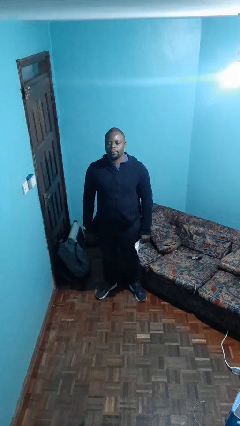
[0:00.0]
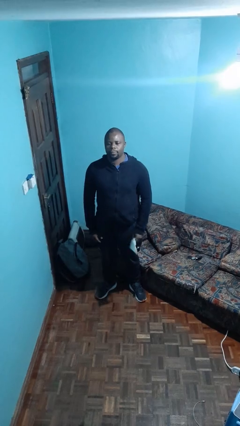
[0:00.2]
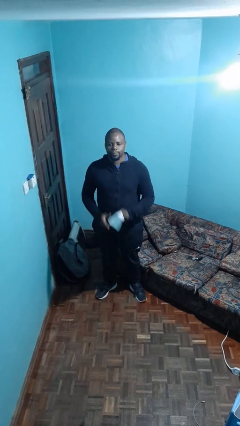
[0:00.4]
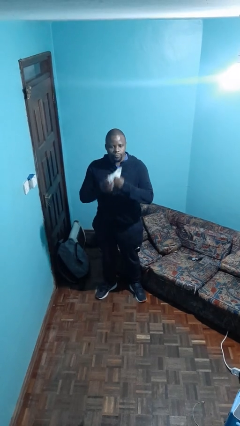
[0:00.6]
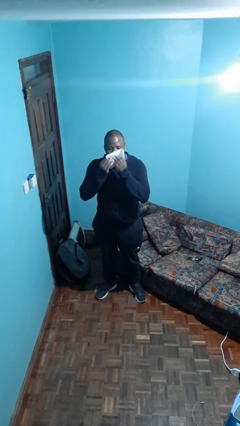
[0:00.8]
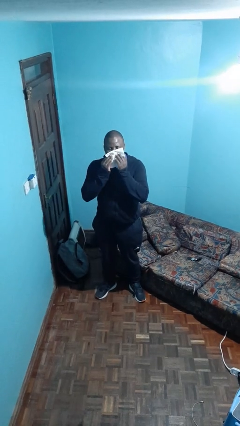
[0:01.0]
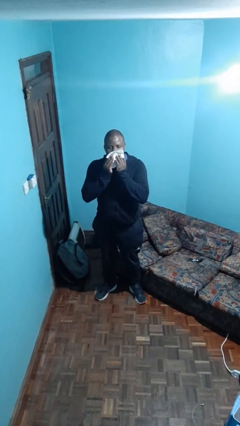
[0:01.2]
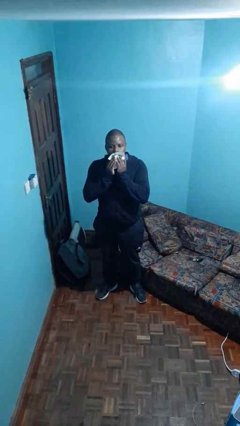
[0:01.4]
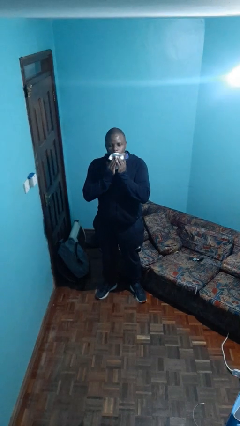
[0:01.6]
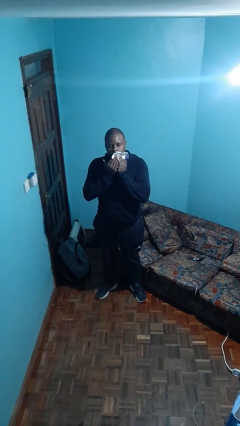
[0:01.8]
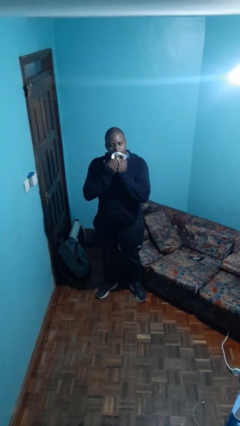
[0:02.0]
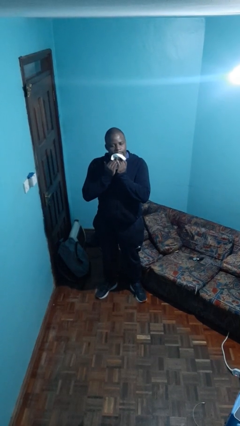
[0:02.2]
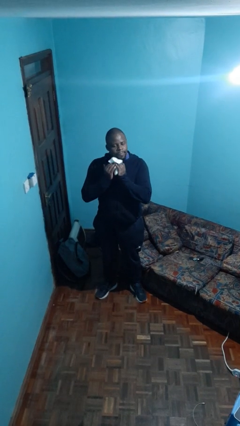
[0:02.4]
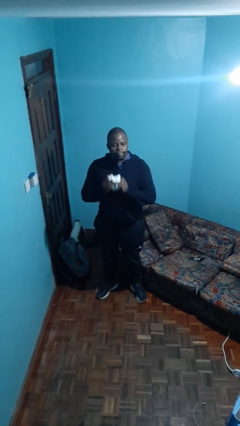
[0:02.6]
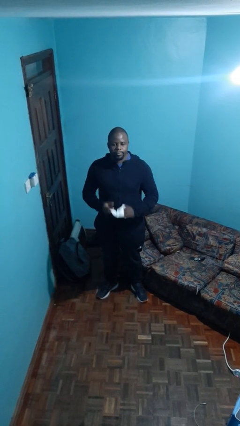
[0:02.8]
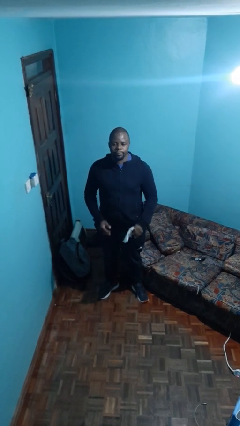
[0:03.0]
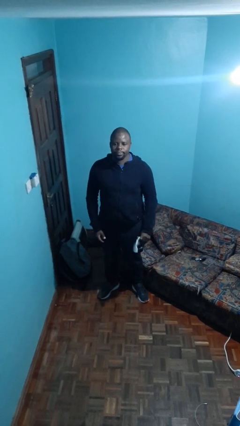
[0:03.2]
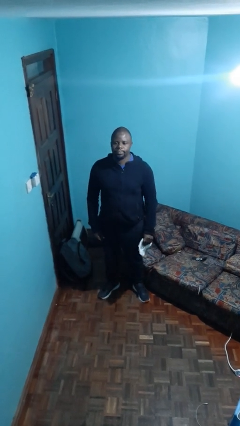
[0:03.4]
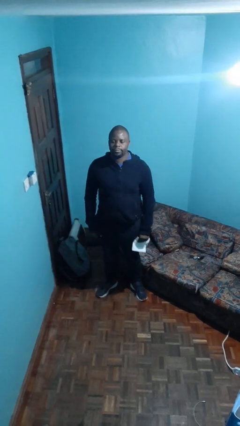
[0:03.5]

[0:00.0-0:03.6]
person wipes mouth with napkin

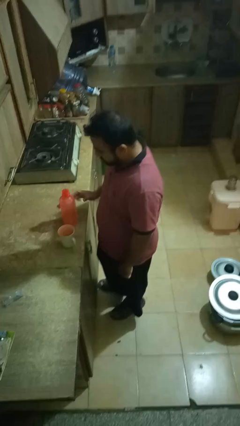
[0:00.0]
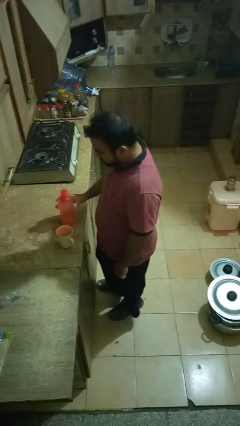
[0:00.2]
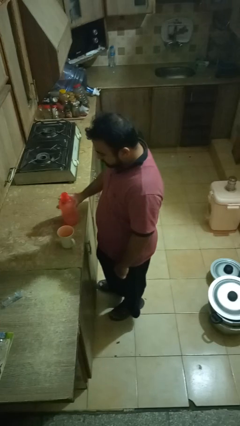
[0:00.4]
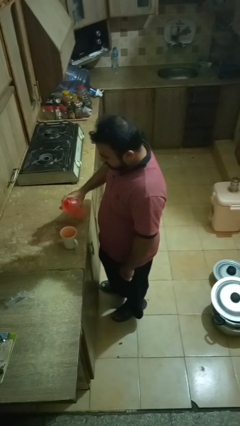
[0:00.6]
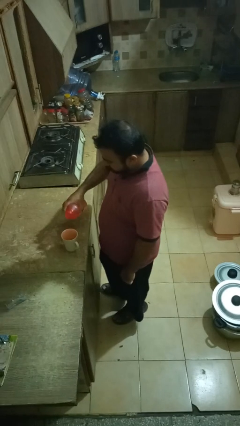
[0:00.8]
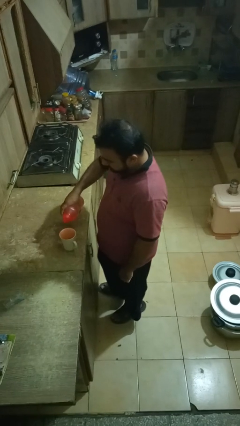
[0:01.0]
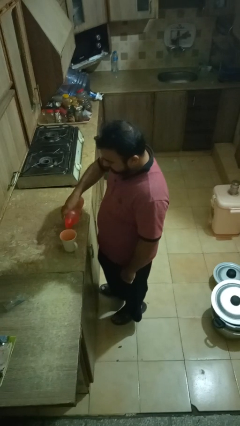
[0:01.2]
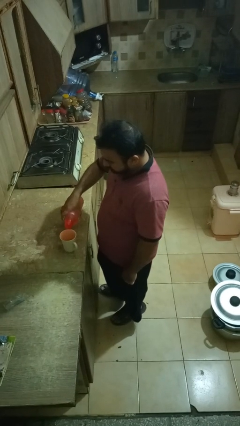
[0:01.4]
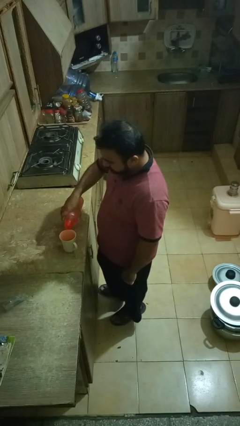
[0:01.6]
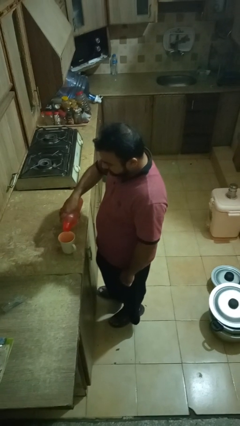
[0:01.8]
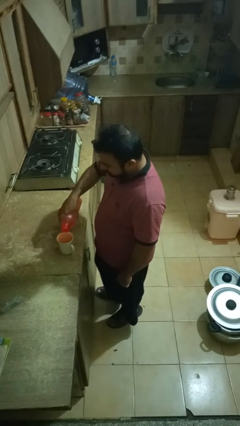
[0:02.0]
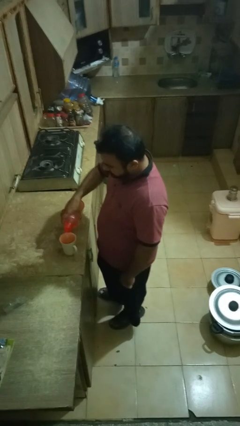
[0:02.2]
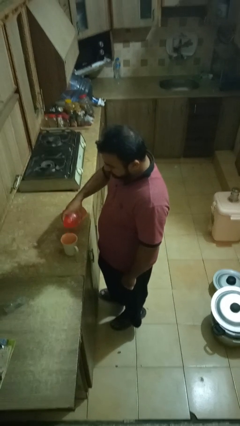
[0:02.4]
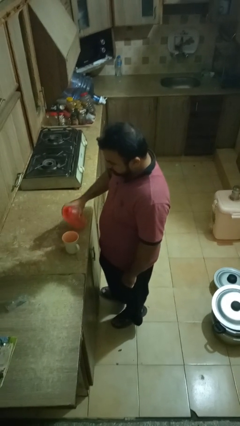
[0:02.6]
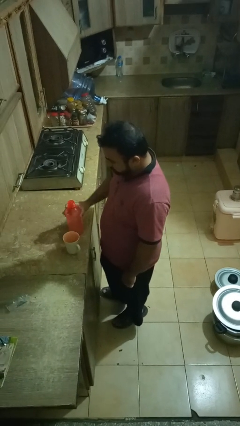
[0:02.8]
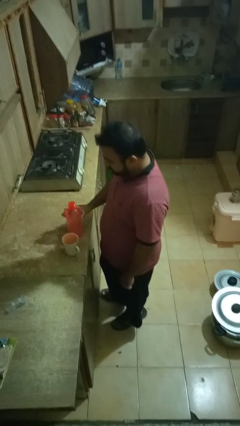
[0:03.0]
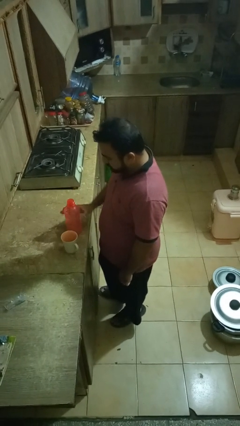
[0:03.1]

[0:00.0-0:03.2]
person pours liquid into cup

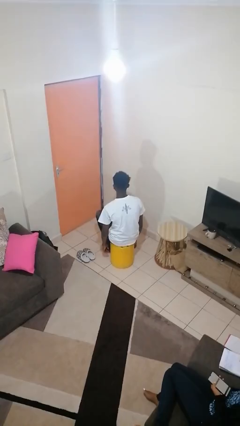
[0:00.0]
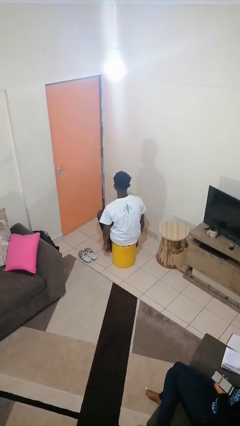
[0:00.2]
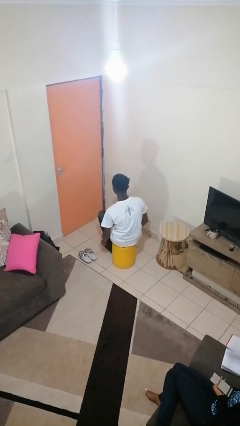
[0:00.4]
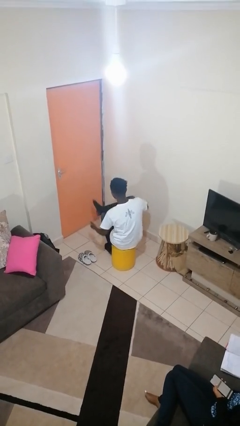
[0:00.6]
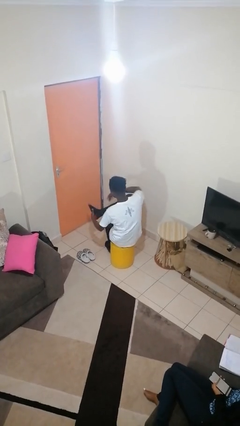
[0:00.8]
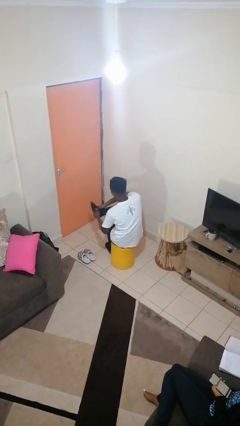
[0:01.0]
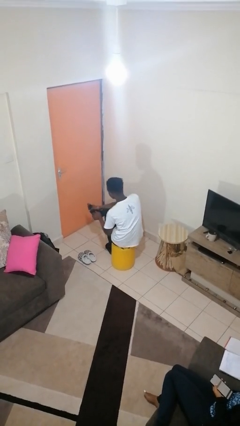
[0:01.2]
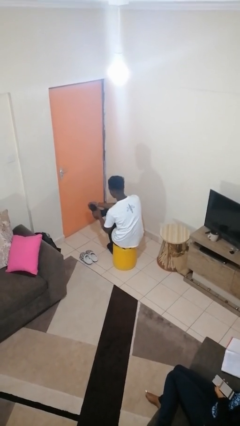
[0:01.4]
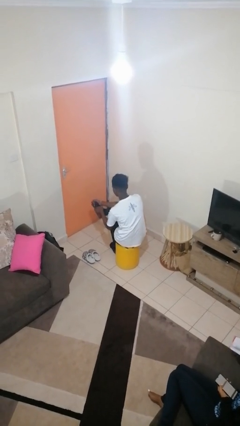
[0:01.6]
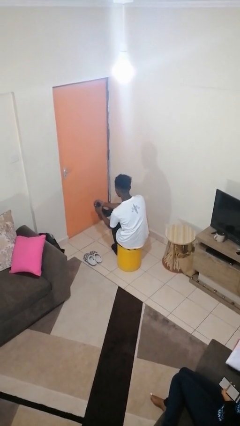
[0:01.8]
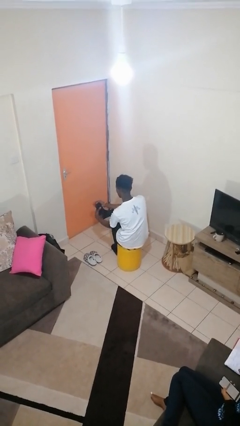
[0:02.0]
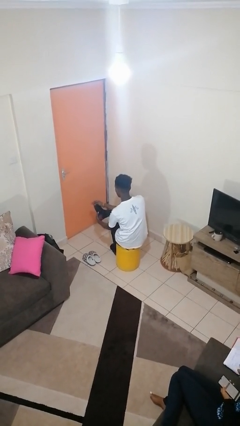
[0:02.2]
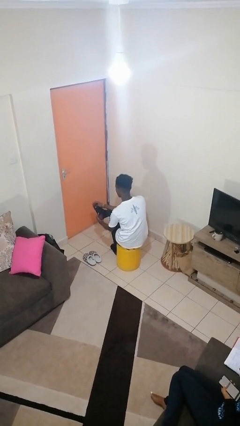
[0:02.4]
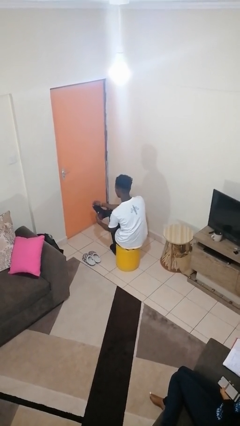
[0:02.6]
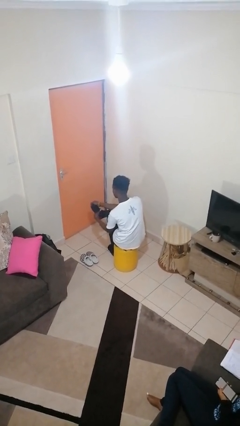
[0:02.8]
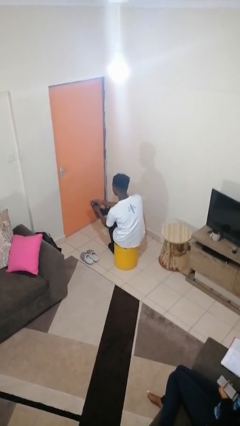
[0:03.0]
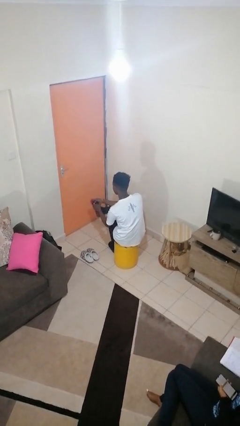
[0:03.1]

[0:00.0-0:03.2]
person rubs foot

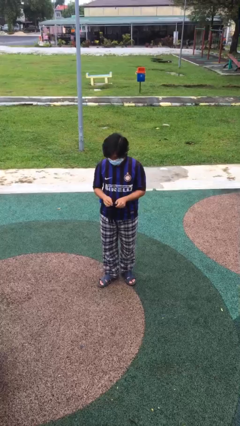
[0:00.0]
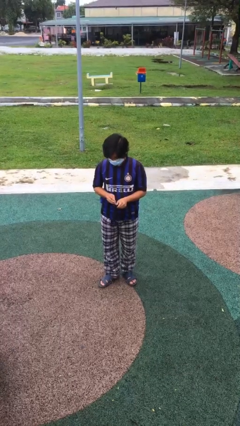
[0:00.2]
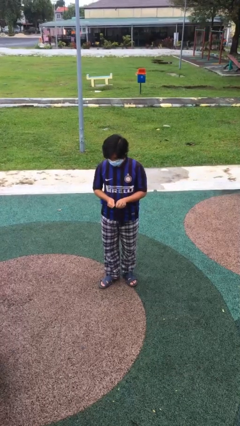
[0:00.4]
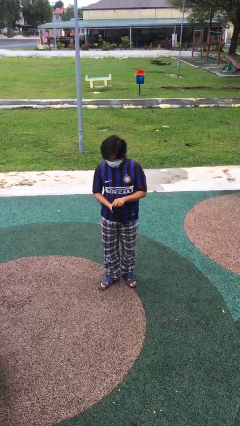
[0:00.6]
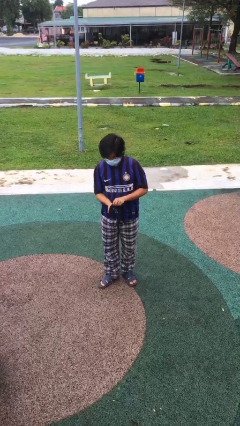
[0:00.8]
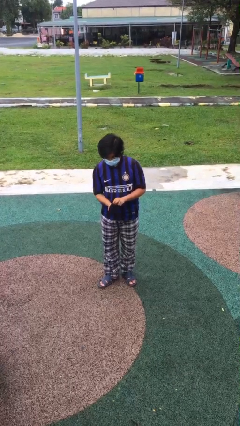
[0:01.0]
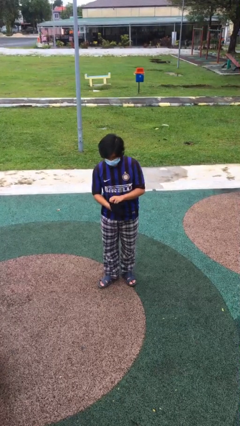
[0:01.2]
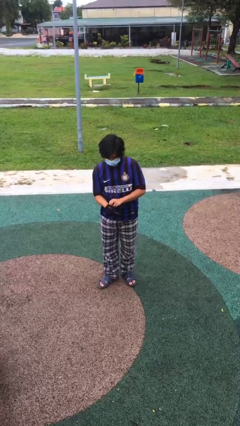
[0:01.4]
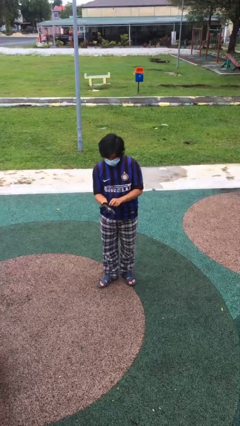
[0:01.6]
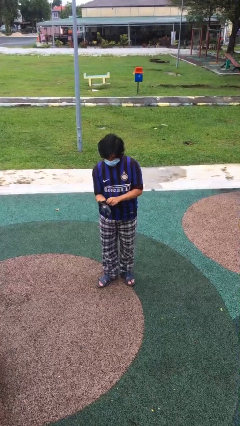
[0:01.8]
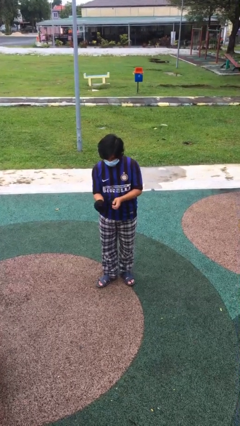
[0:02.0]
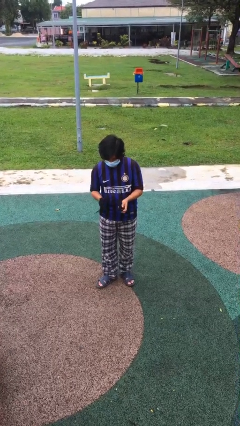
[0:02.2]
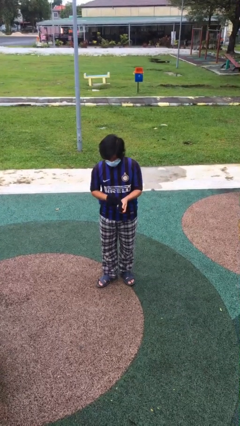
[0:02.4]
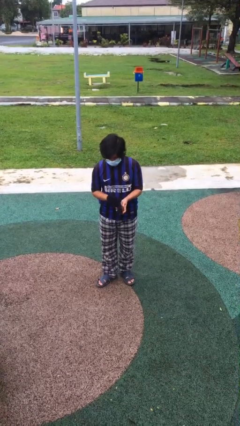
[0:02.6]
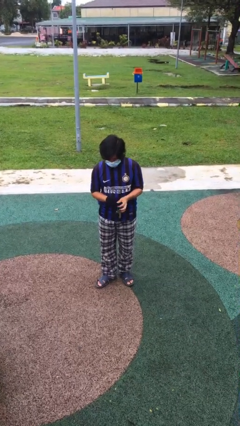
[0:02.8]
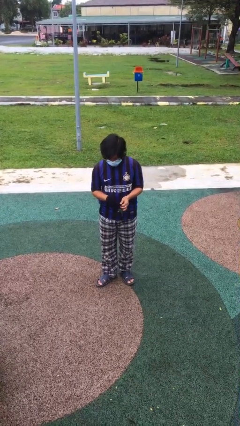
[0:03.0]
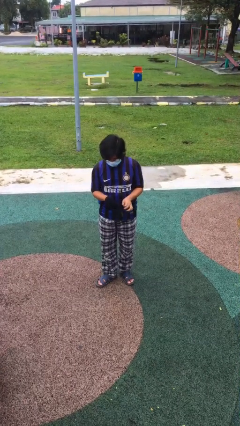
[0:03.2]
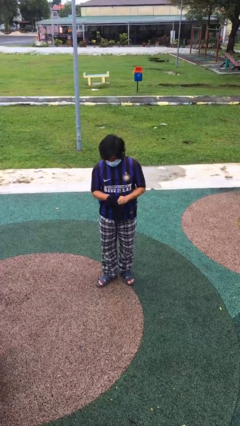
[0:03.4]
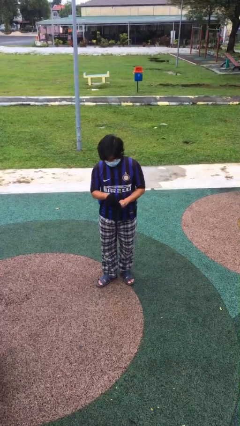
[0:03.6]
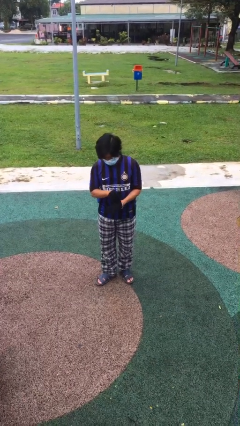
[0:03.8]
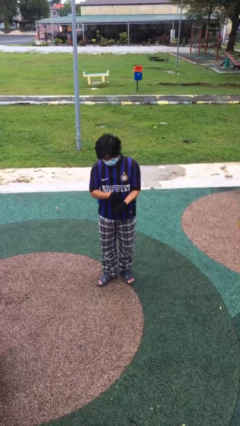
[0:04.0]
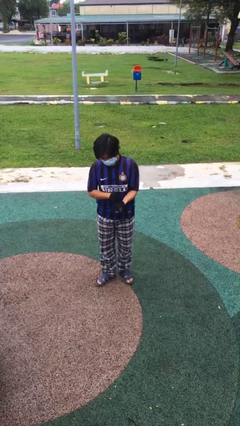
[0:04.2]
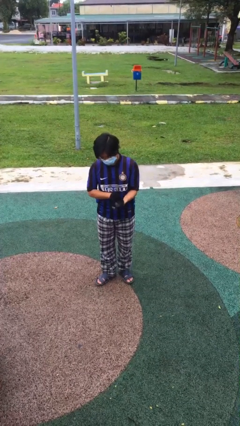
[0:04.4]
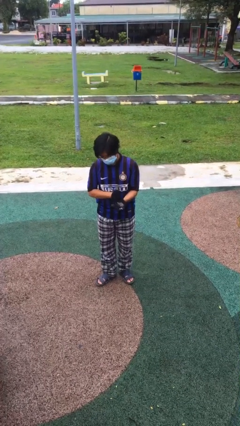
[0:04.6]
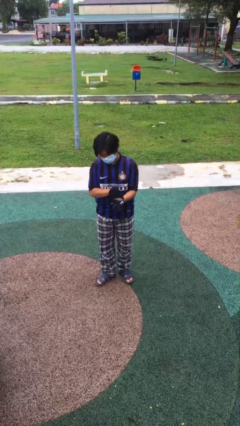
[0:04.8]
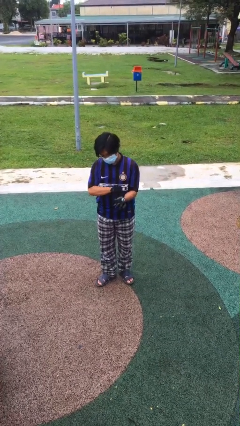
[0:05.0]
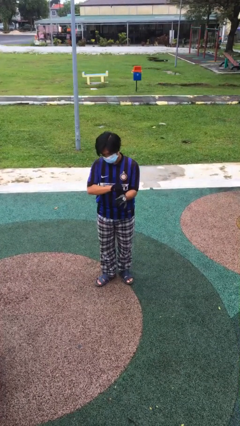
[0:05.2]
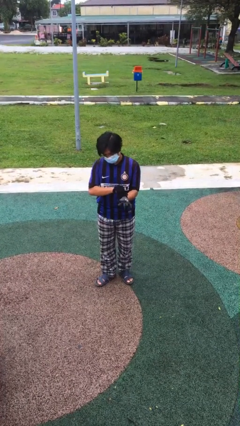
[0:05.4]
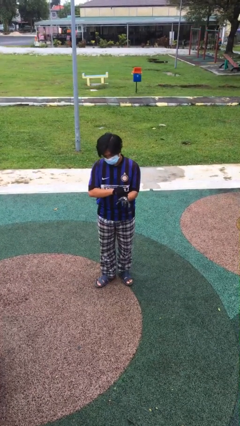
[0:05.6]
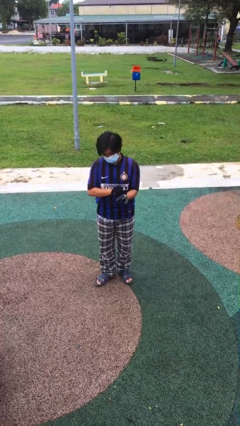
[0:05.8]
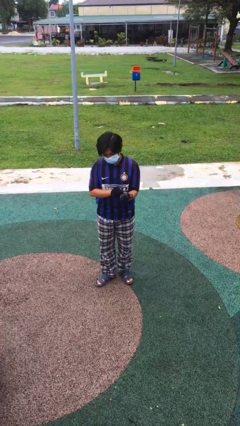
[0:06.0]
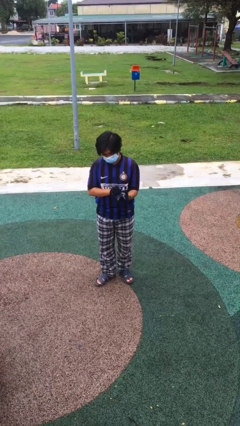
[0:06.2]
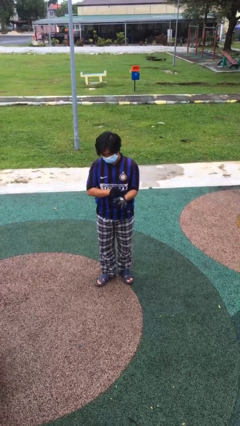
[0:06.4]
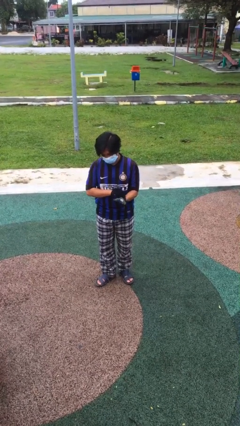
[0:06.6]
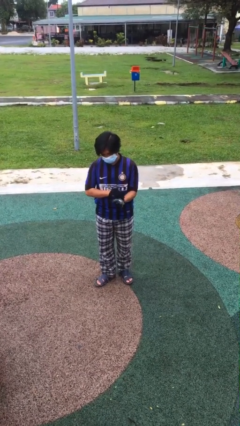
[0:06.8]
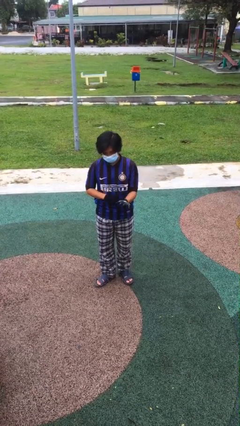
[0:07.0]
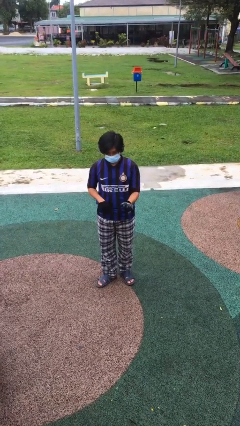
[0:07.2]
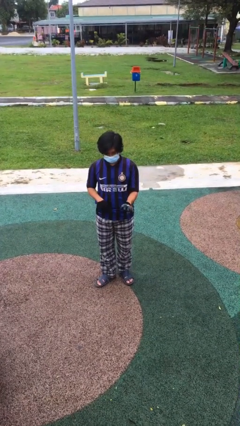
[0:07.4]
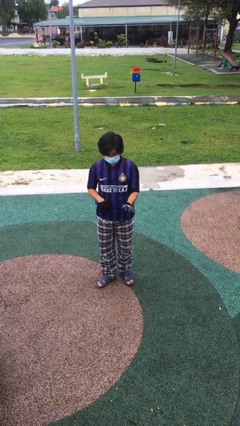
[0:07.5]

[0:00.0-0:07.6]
person puts on gloves

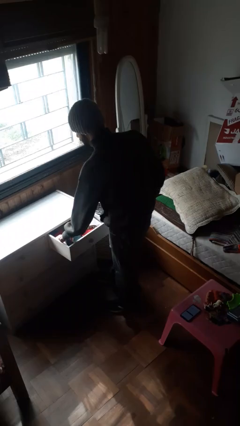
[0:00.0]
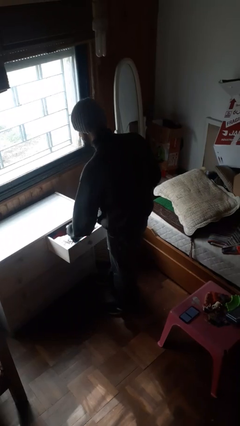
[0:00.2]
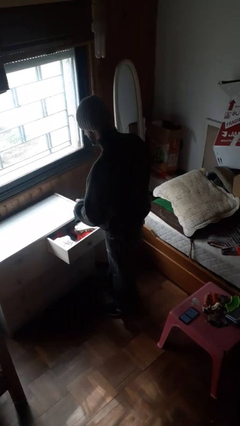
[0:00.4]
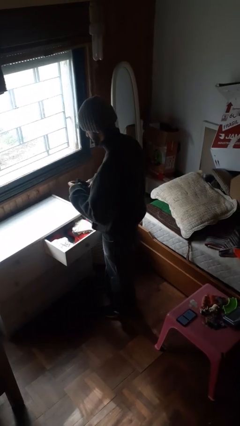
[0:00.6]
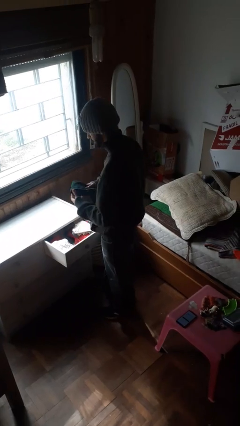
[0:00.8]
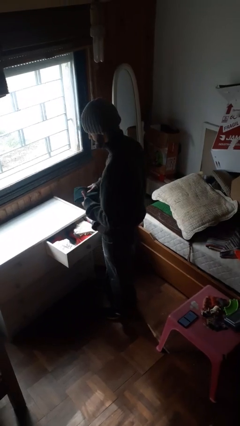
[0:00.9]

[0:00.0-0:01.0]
person takes clothes from dresser
